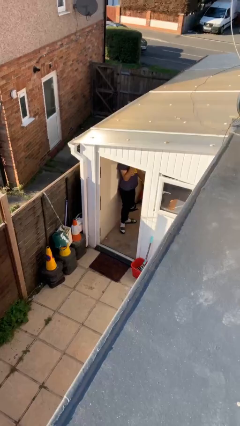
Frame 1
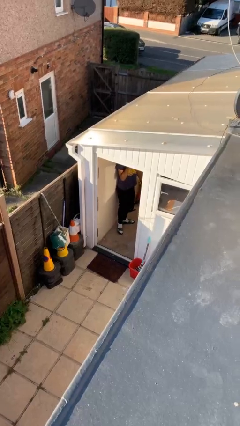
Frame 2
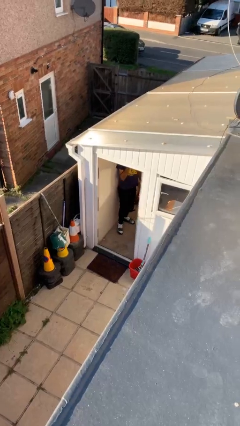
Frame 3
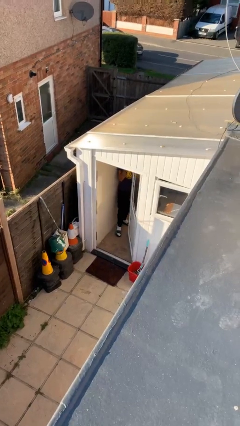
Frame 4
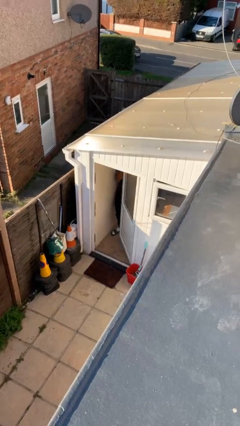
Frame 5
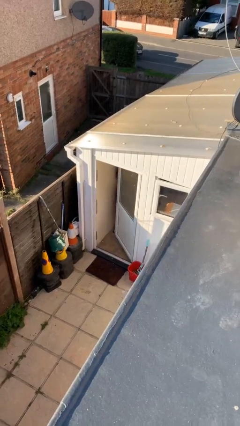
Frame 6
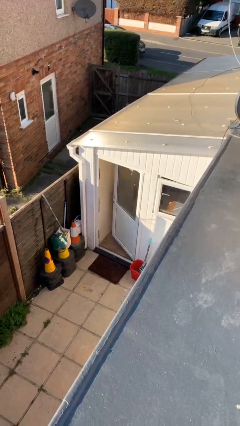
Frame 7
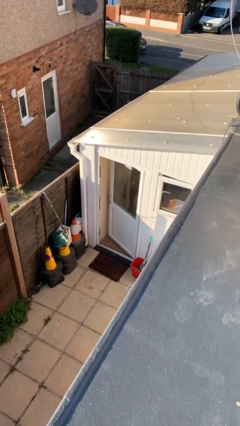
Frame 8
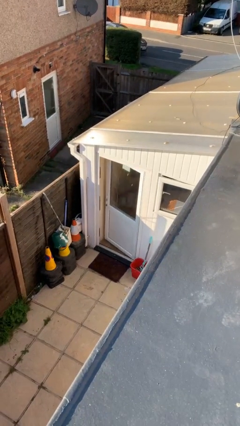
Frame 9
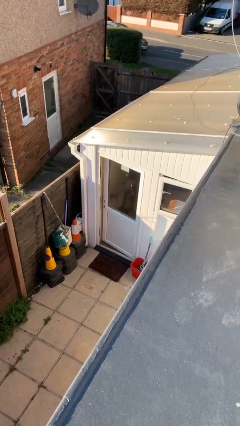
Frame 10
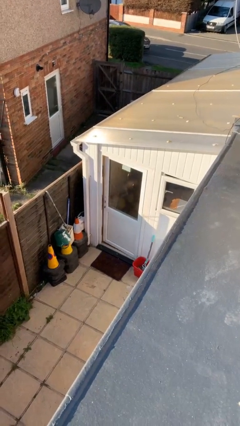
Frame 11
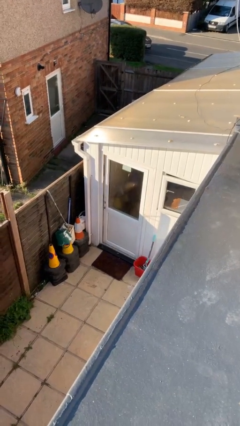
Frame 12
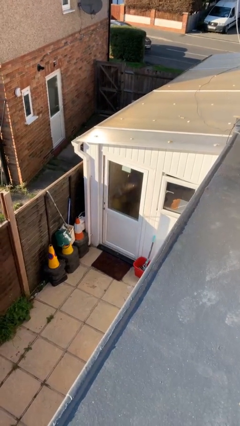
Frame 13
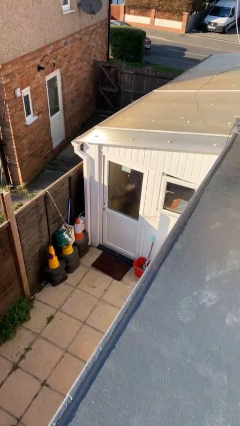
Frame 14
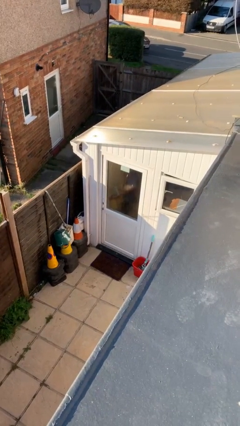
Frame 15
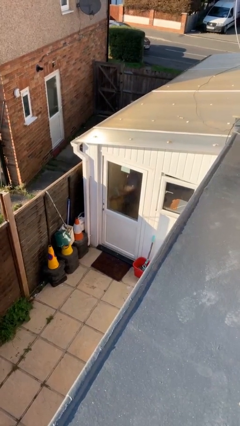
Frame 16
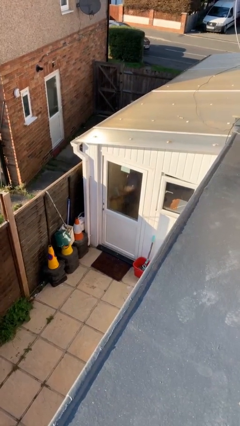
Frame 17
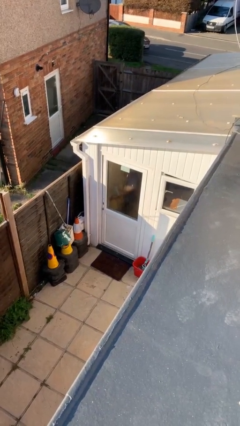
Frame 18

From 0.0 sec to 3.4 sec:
person closes facility door

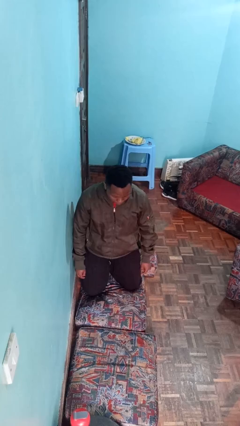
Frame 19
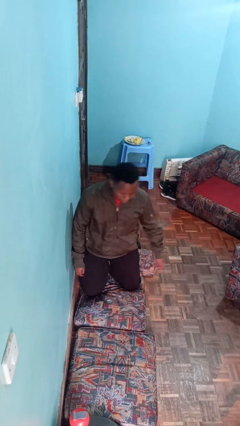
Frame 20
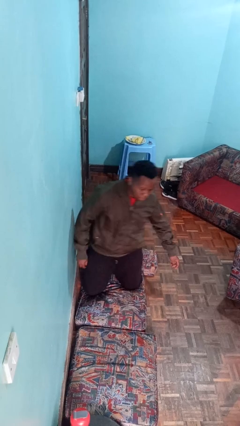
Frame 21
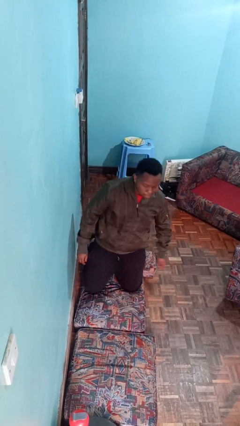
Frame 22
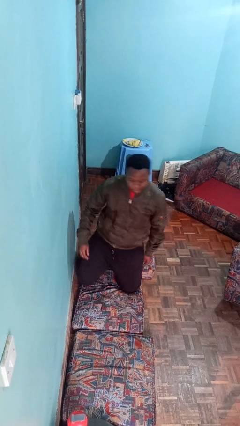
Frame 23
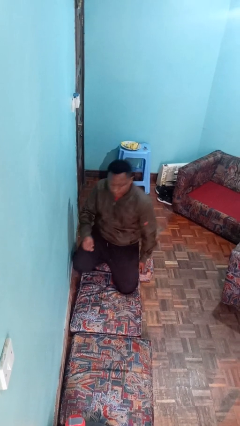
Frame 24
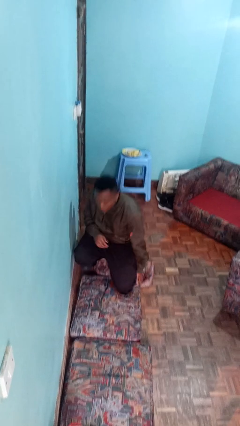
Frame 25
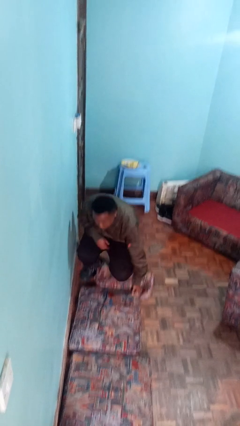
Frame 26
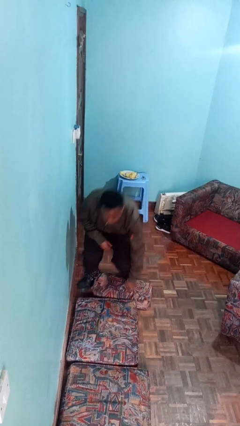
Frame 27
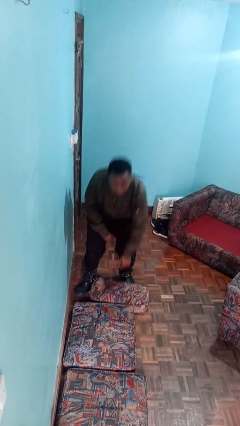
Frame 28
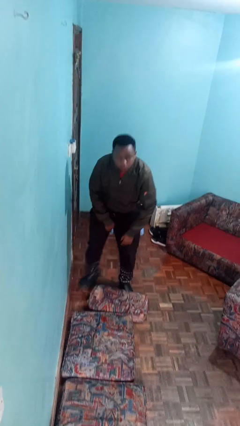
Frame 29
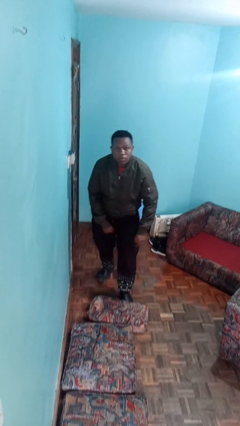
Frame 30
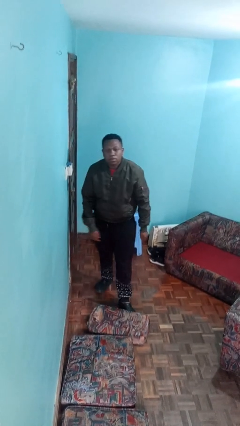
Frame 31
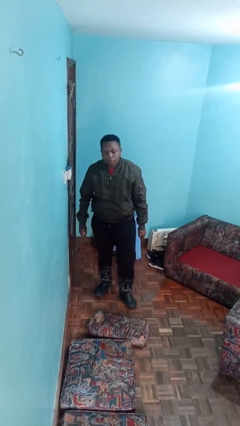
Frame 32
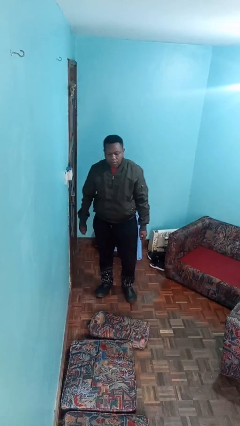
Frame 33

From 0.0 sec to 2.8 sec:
person stands up from floor

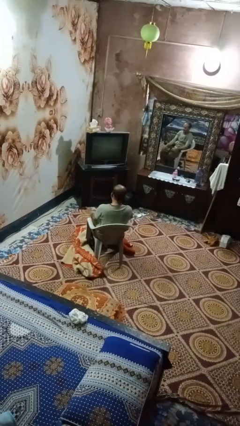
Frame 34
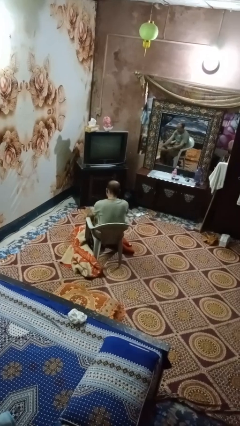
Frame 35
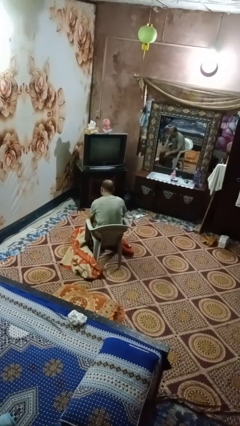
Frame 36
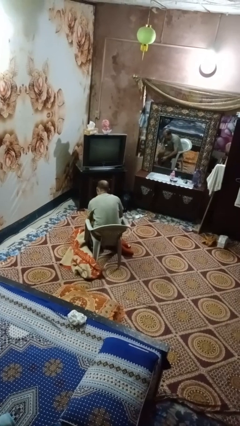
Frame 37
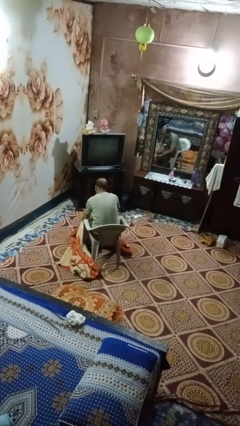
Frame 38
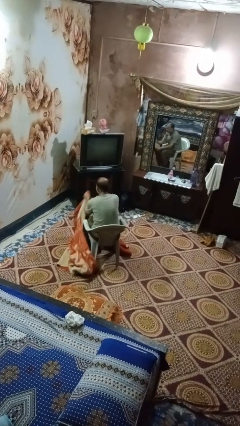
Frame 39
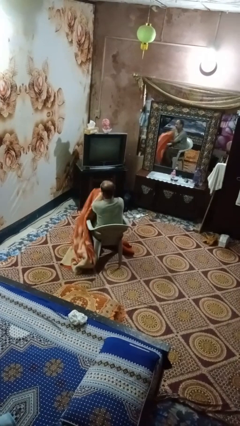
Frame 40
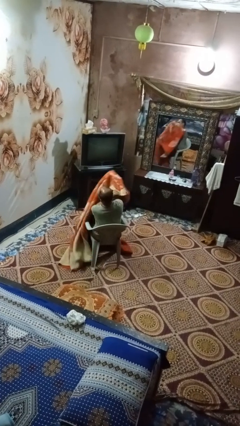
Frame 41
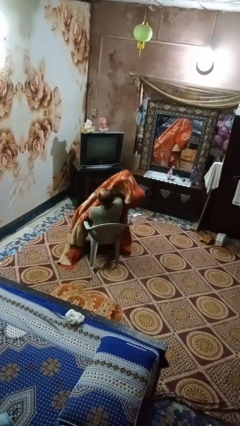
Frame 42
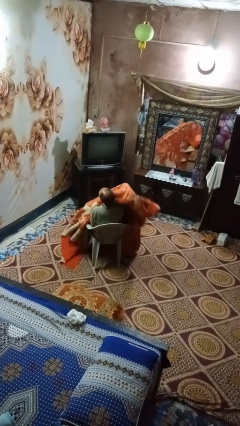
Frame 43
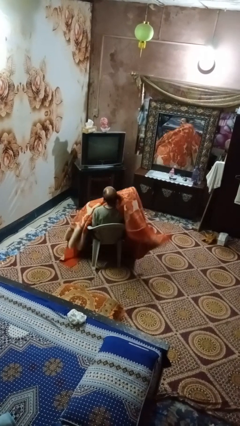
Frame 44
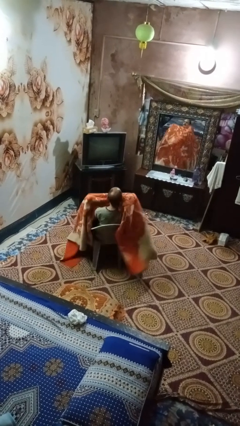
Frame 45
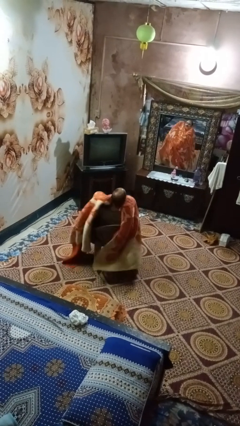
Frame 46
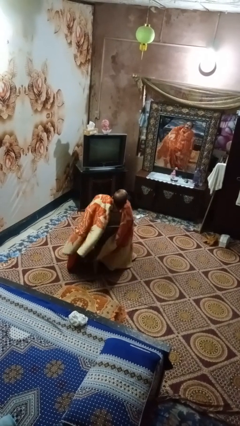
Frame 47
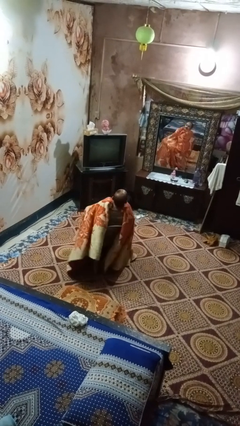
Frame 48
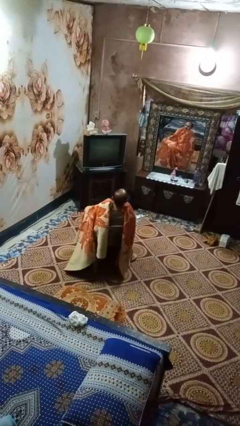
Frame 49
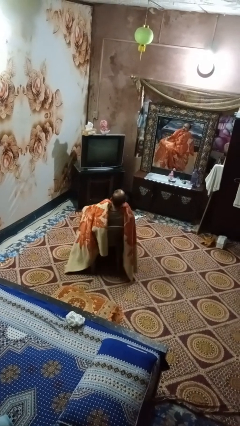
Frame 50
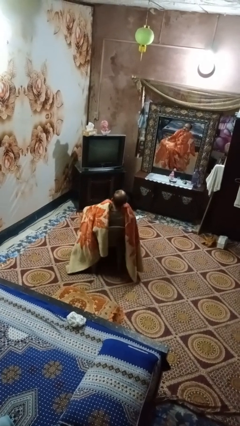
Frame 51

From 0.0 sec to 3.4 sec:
person covers with blanket

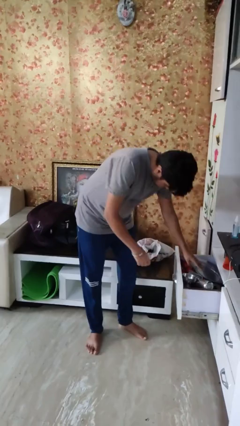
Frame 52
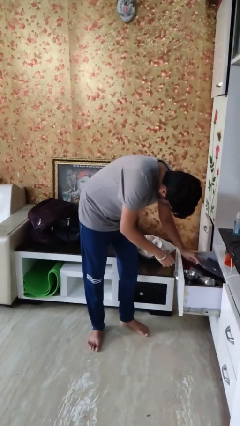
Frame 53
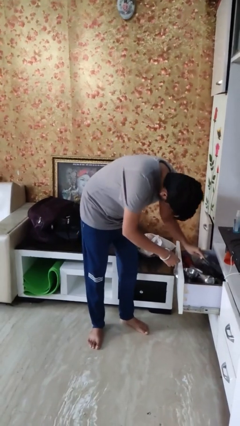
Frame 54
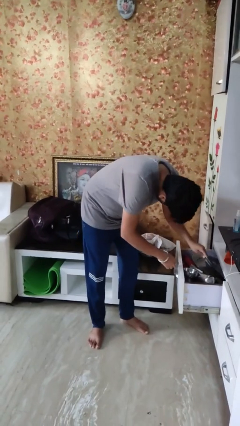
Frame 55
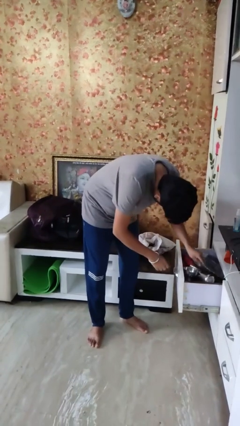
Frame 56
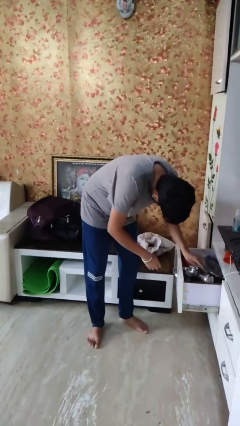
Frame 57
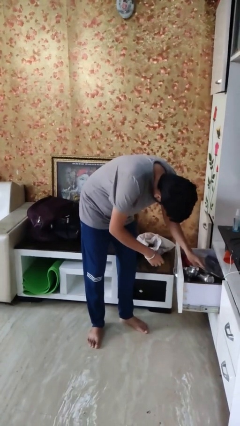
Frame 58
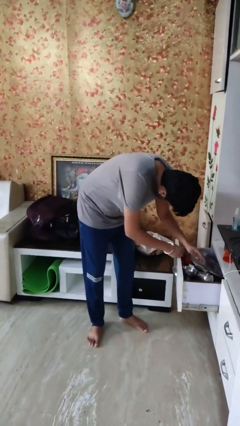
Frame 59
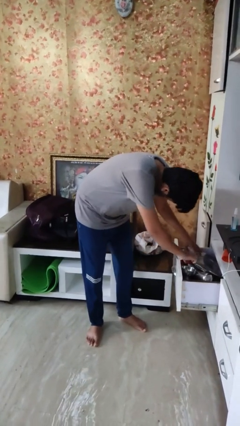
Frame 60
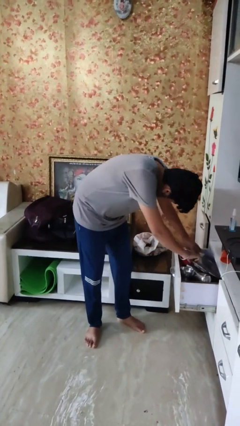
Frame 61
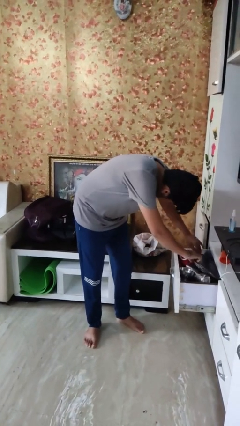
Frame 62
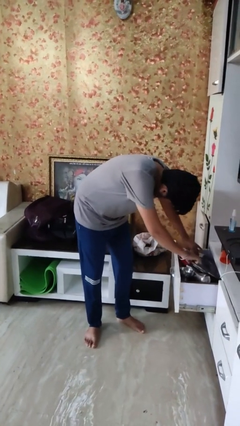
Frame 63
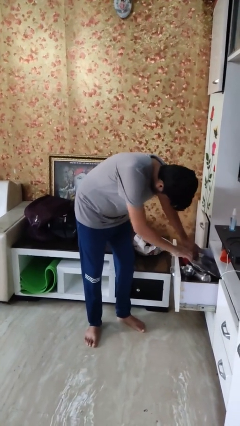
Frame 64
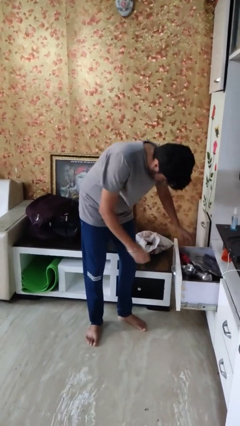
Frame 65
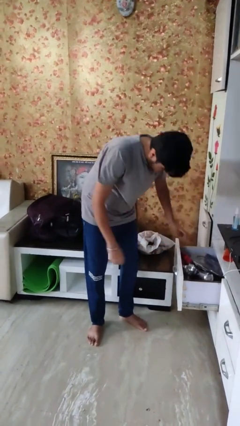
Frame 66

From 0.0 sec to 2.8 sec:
person searches in kitchen drawer

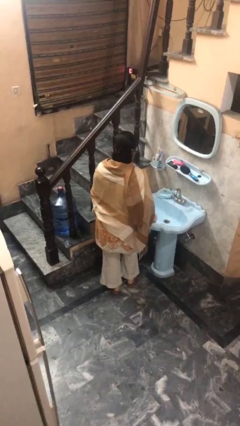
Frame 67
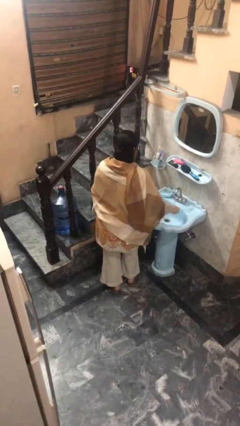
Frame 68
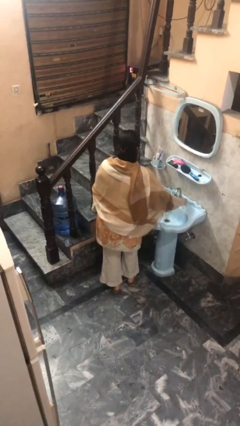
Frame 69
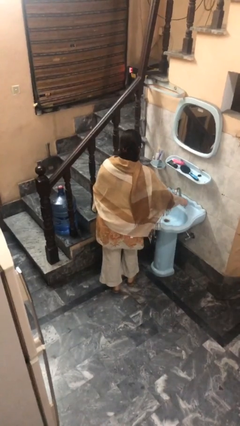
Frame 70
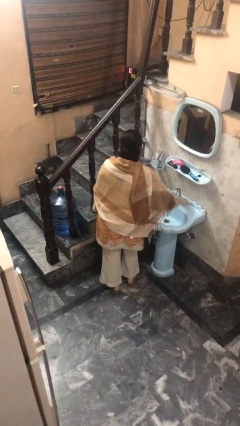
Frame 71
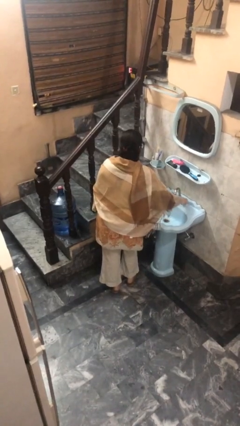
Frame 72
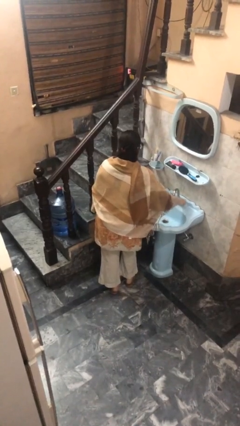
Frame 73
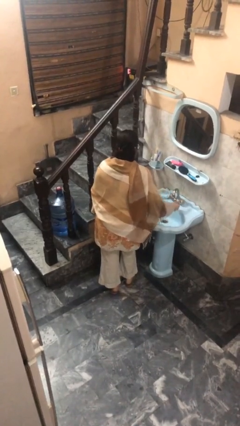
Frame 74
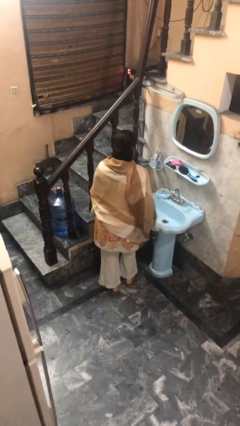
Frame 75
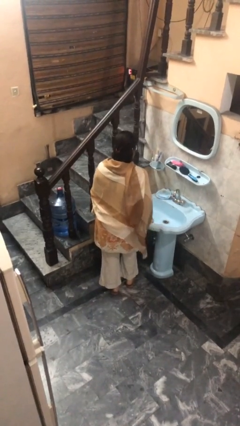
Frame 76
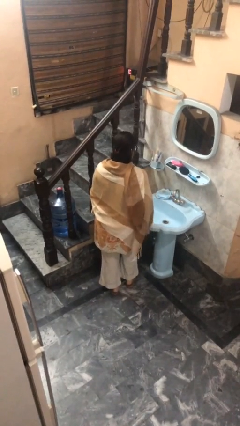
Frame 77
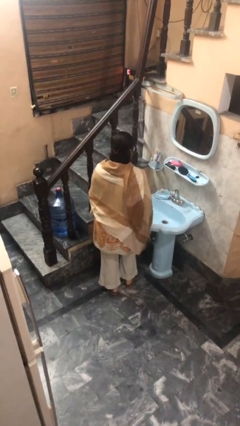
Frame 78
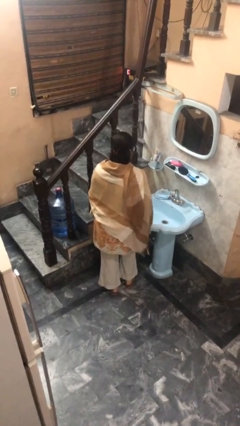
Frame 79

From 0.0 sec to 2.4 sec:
person turns off faucet

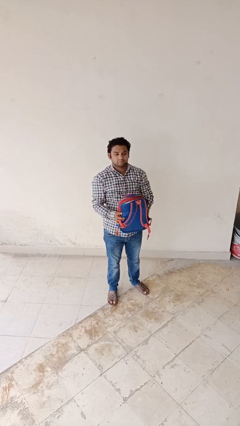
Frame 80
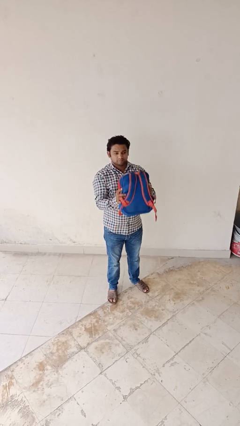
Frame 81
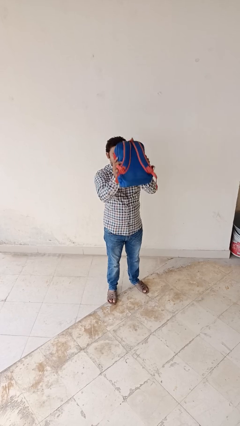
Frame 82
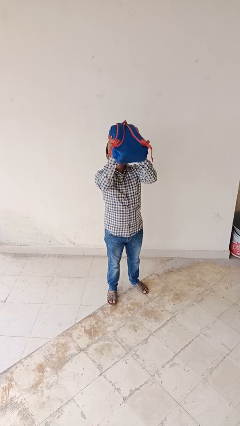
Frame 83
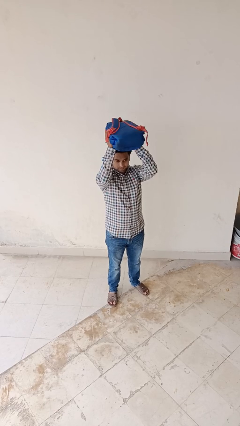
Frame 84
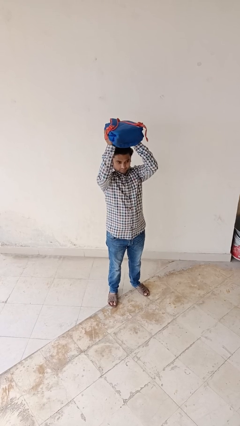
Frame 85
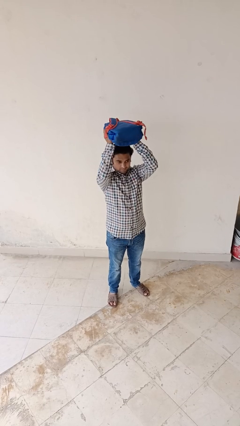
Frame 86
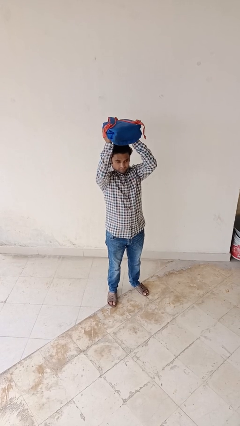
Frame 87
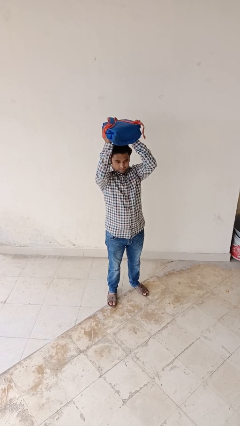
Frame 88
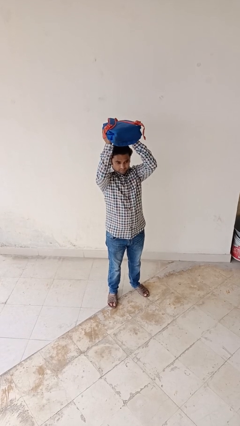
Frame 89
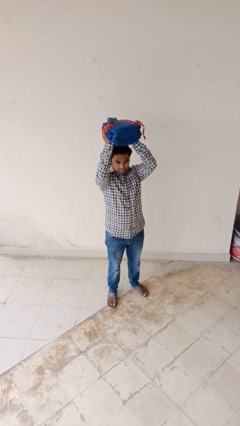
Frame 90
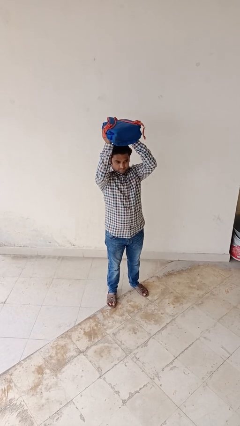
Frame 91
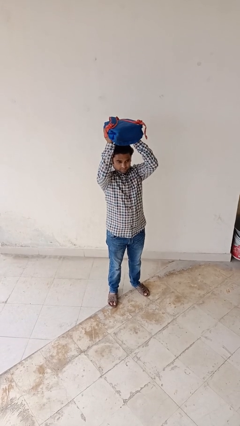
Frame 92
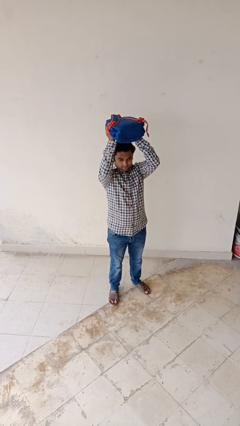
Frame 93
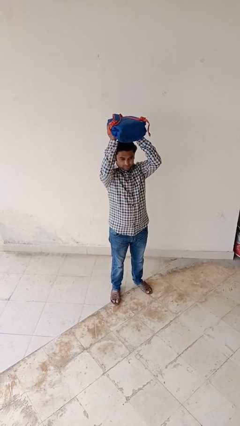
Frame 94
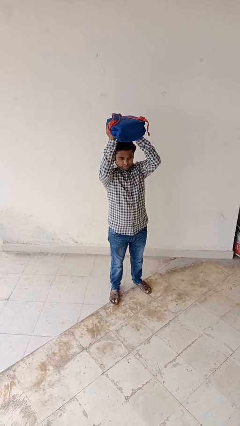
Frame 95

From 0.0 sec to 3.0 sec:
person holds object above head
